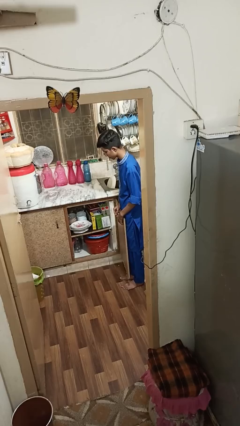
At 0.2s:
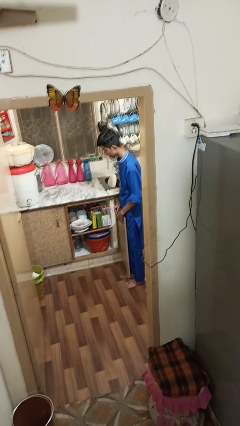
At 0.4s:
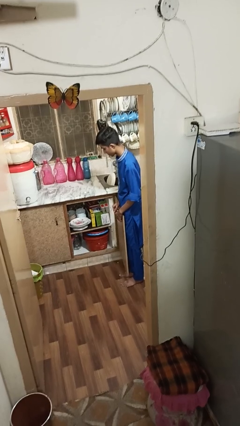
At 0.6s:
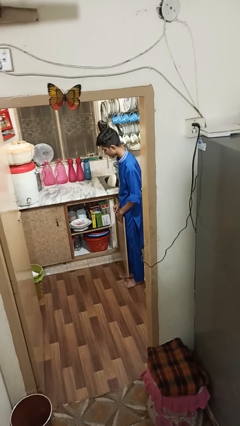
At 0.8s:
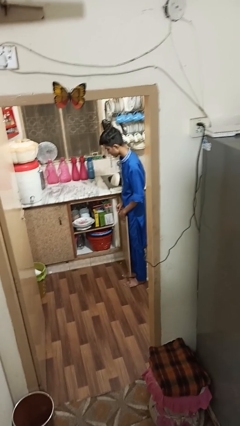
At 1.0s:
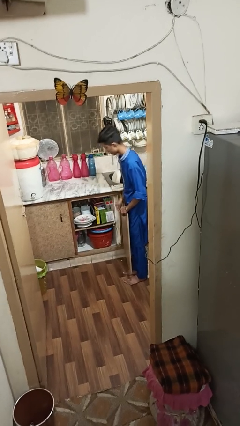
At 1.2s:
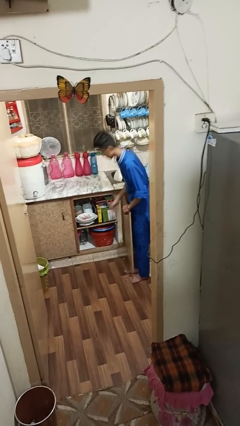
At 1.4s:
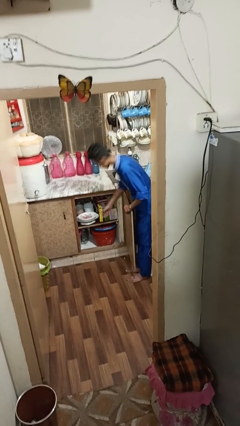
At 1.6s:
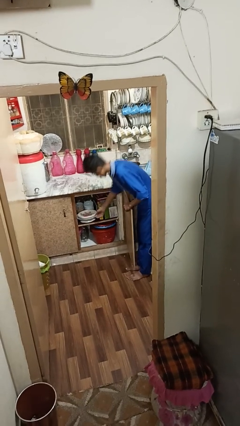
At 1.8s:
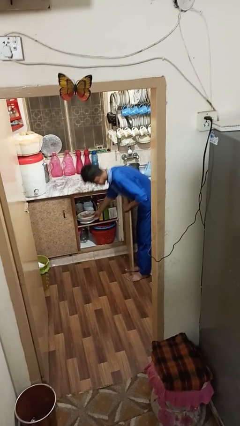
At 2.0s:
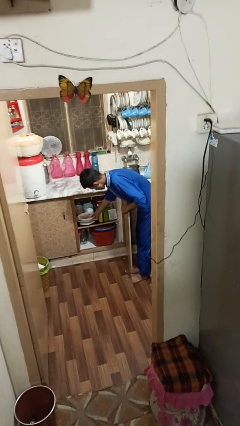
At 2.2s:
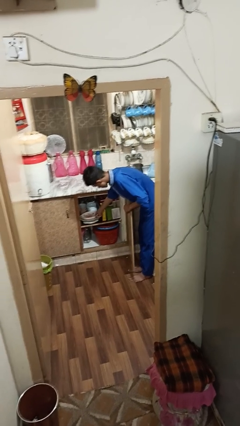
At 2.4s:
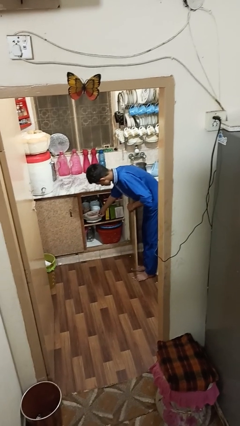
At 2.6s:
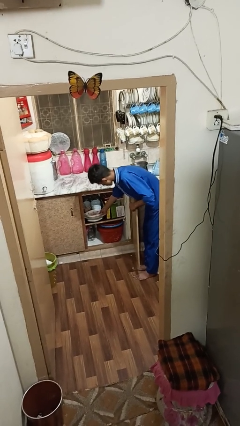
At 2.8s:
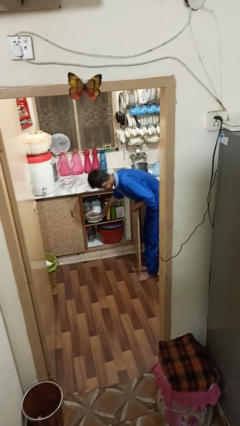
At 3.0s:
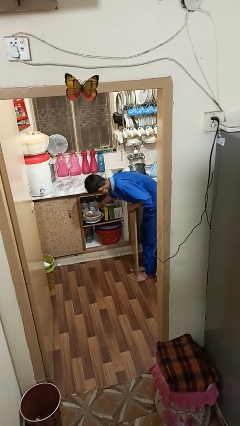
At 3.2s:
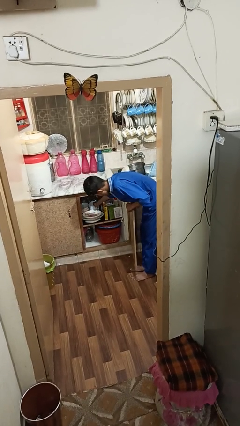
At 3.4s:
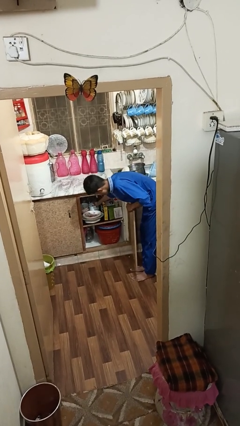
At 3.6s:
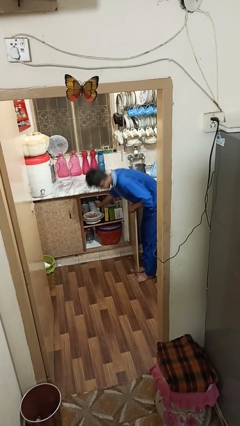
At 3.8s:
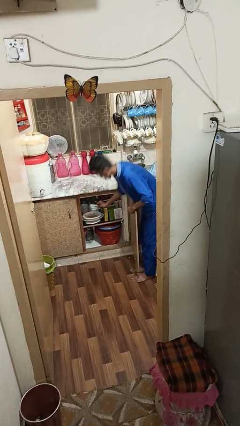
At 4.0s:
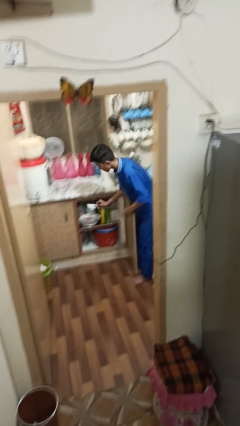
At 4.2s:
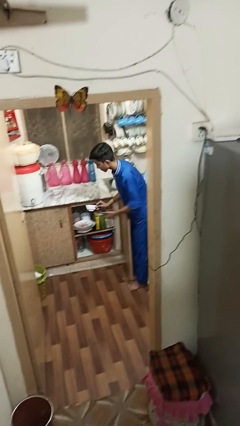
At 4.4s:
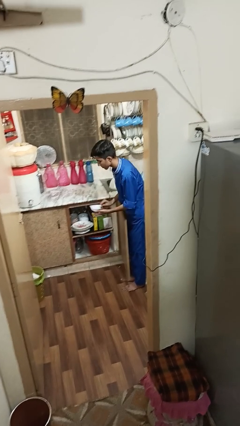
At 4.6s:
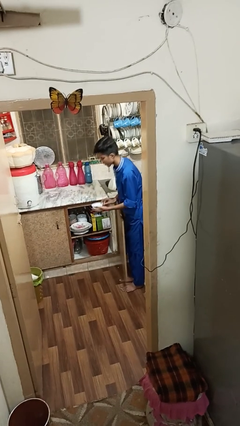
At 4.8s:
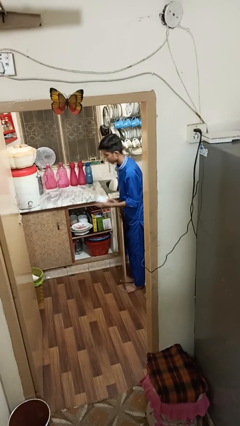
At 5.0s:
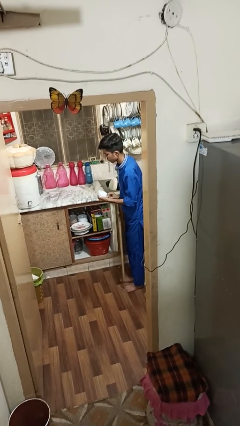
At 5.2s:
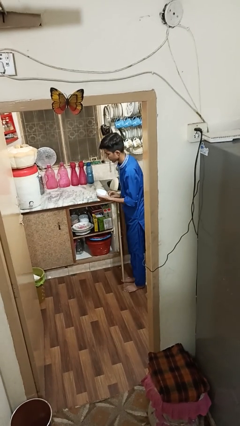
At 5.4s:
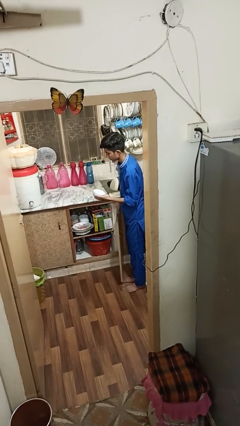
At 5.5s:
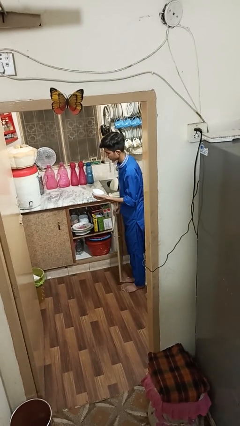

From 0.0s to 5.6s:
person takes object from cabinet

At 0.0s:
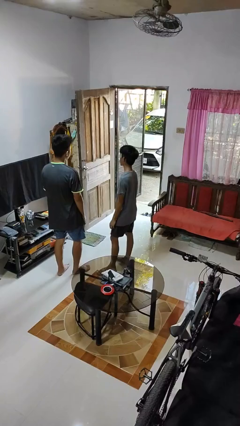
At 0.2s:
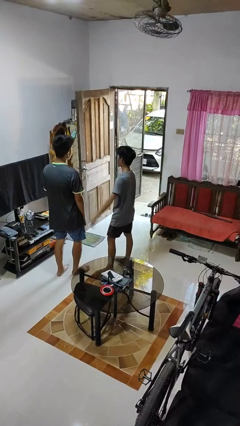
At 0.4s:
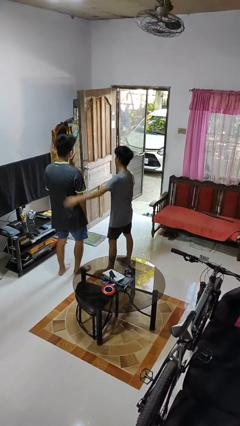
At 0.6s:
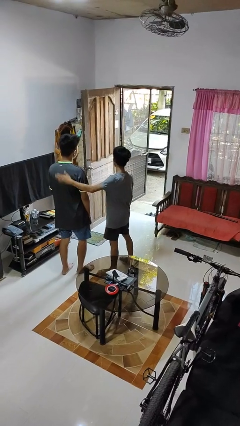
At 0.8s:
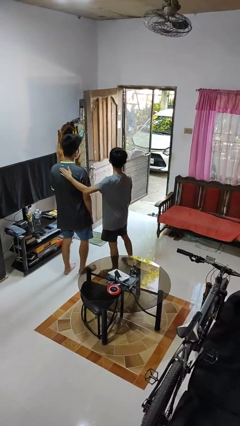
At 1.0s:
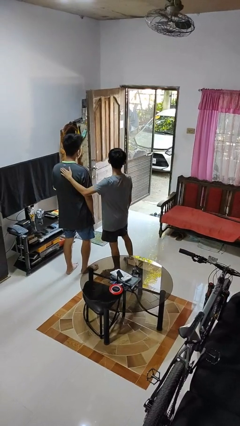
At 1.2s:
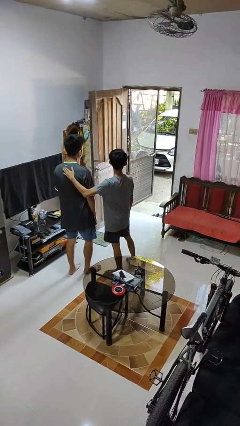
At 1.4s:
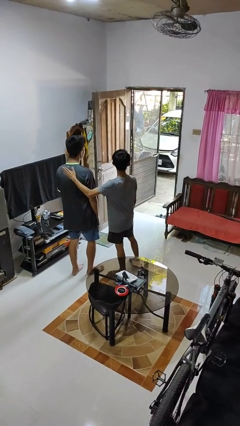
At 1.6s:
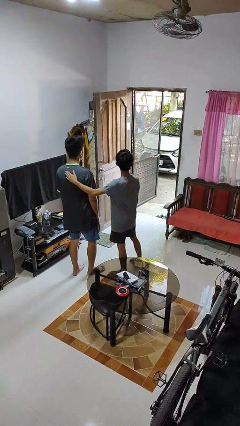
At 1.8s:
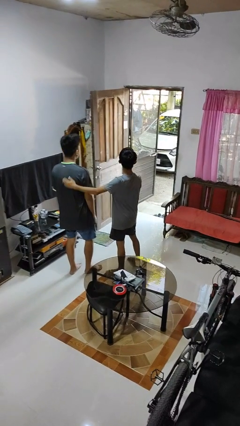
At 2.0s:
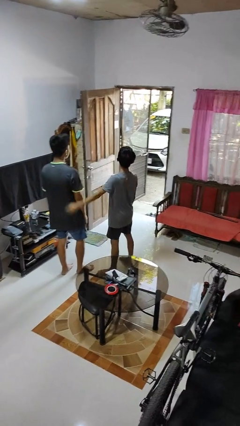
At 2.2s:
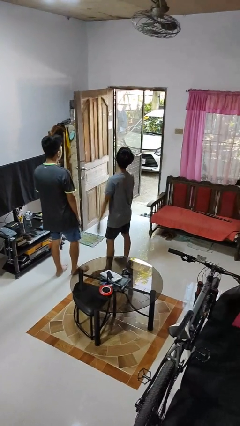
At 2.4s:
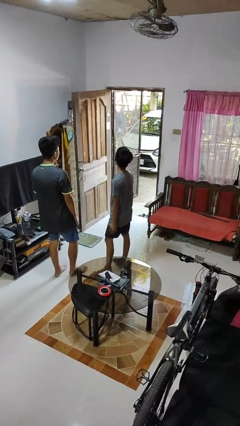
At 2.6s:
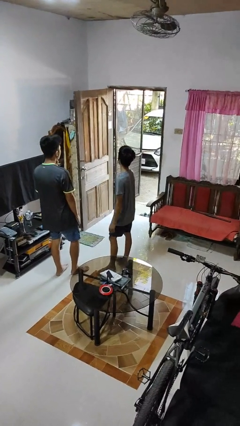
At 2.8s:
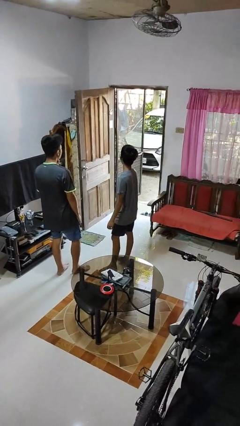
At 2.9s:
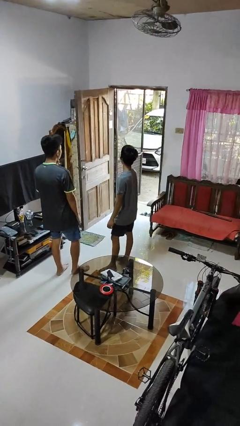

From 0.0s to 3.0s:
person touches back of person

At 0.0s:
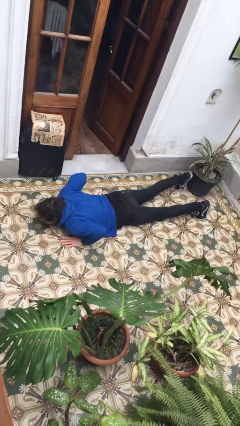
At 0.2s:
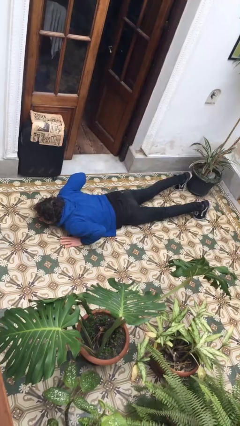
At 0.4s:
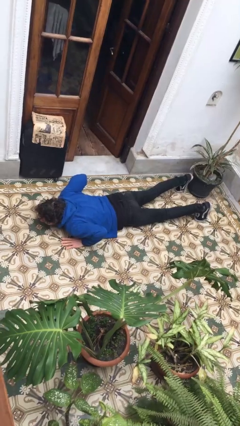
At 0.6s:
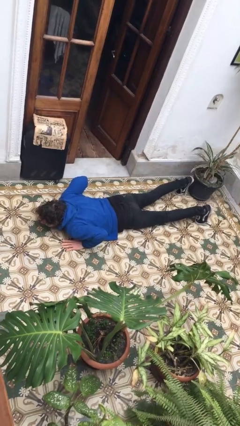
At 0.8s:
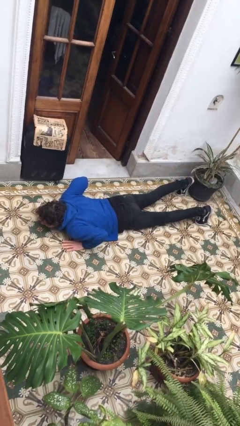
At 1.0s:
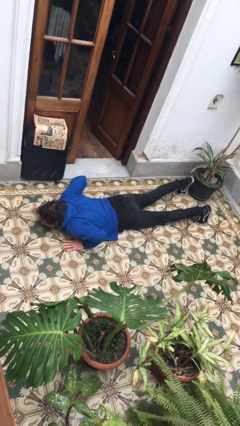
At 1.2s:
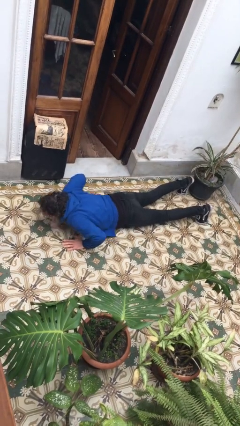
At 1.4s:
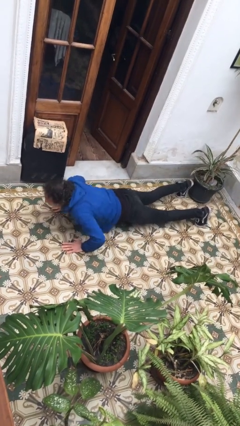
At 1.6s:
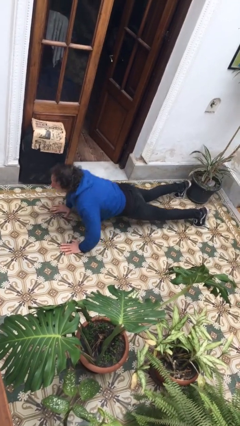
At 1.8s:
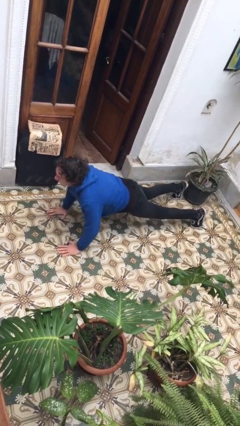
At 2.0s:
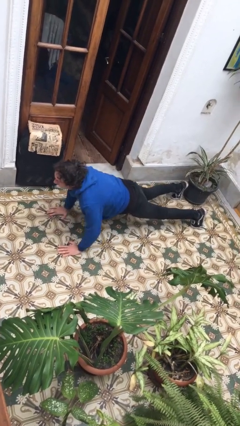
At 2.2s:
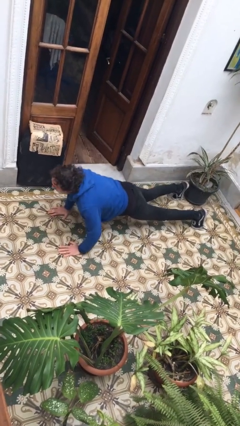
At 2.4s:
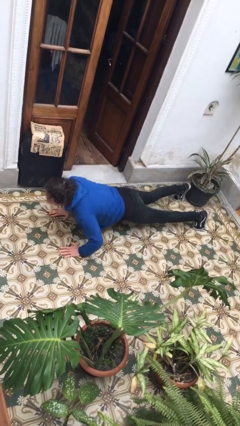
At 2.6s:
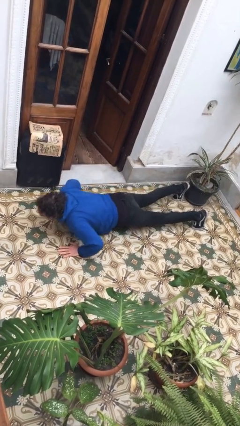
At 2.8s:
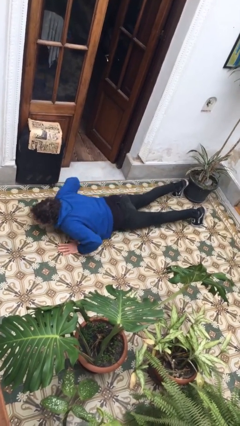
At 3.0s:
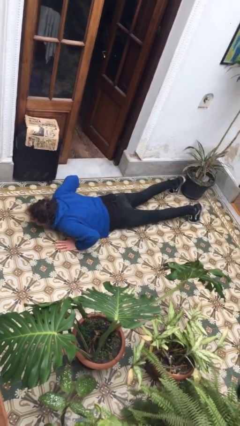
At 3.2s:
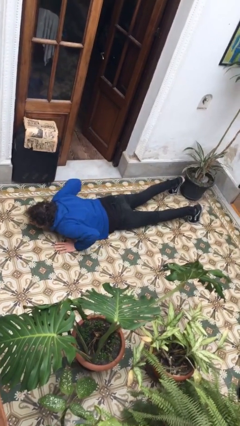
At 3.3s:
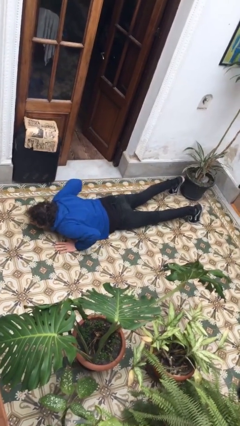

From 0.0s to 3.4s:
person exercises with pushup

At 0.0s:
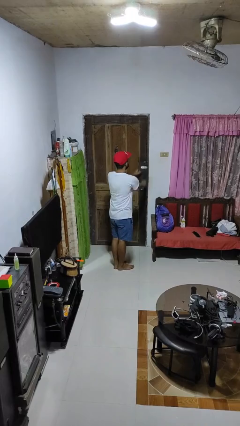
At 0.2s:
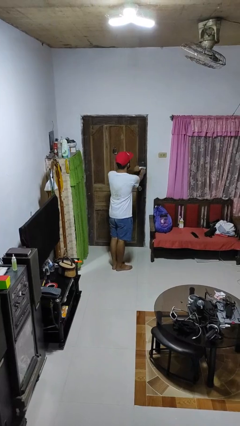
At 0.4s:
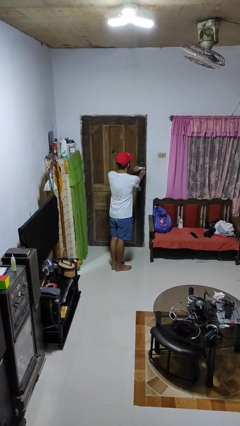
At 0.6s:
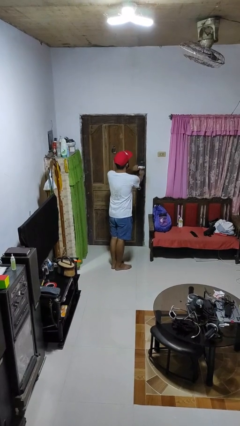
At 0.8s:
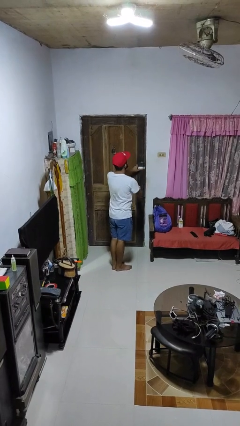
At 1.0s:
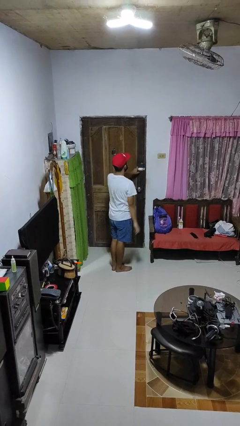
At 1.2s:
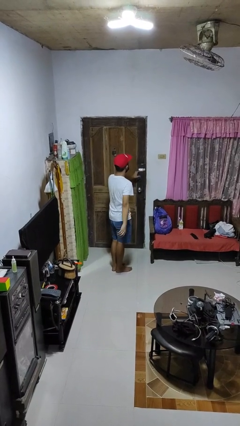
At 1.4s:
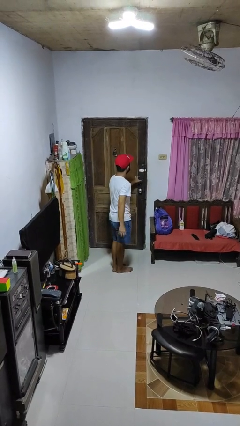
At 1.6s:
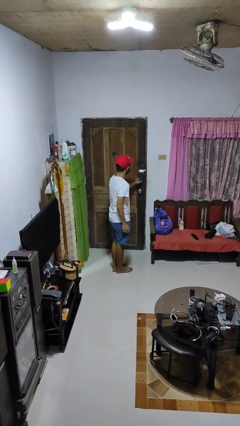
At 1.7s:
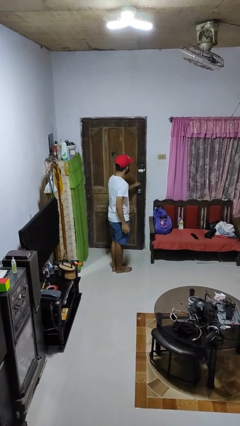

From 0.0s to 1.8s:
person unlocks door with keys

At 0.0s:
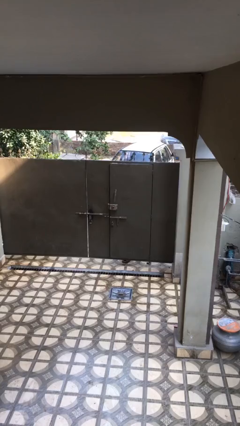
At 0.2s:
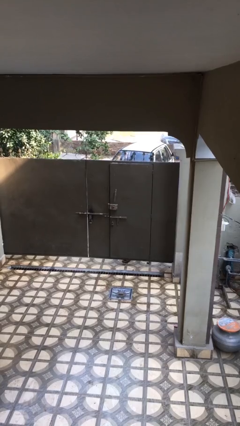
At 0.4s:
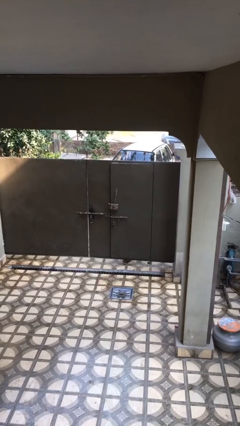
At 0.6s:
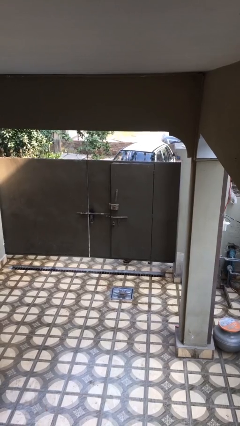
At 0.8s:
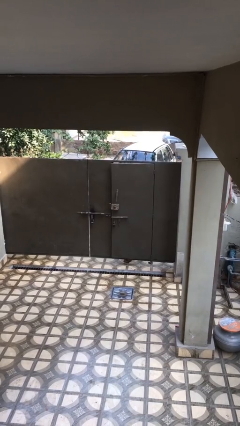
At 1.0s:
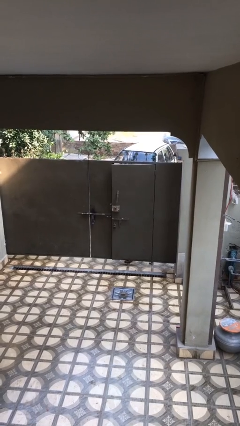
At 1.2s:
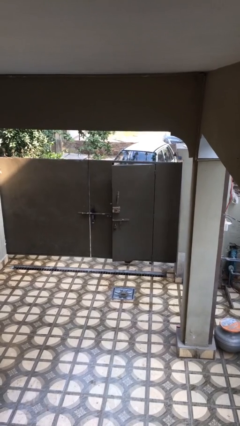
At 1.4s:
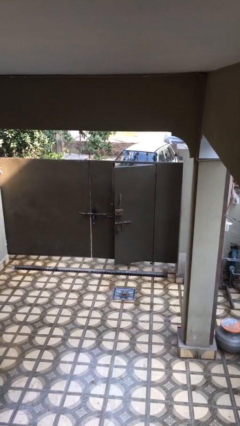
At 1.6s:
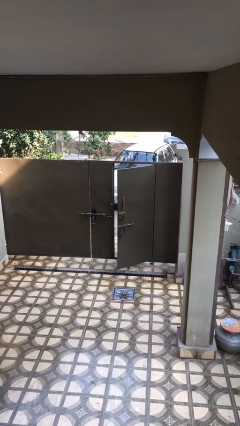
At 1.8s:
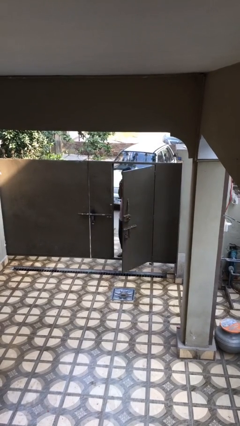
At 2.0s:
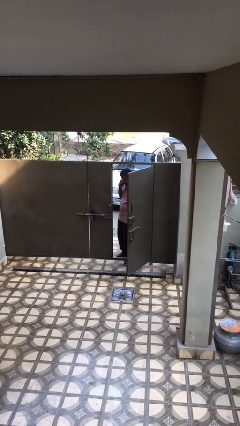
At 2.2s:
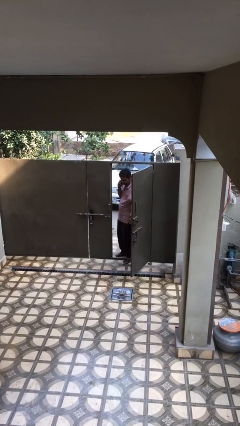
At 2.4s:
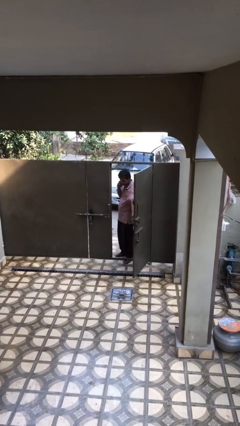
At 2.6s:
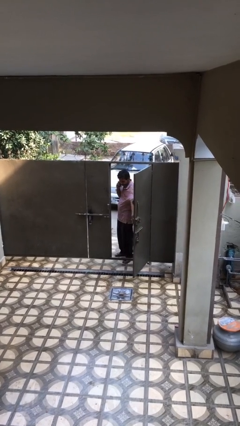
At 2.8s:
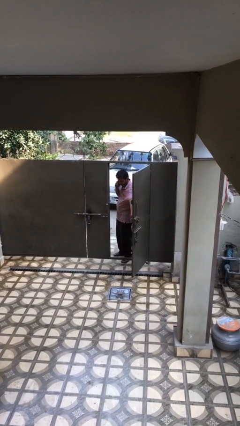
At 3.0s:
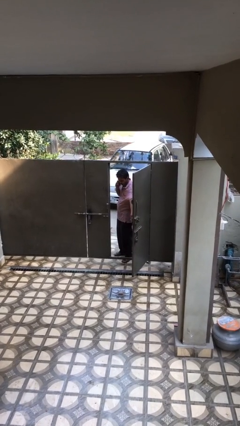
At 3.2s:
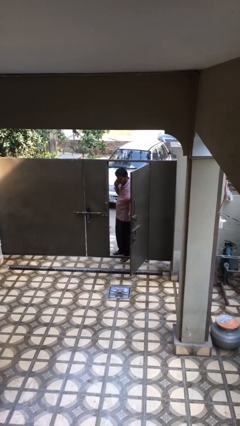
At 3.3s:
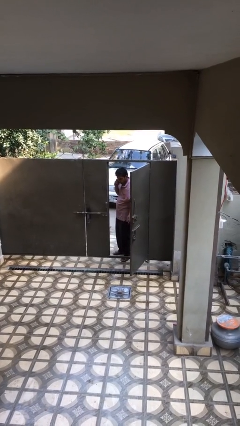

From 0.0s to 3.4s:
person opens facility door

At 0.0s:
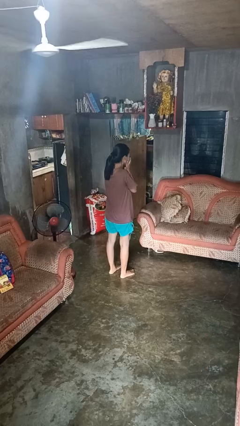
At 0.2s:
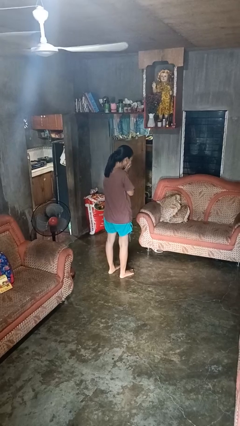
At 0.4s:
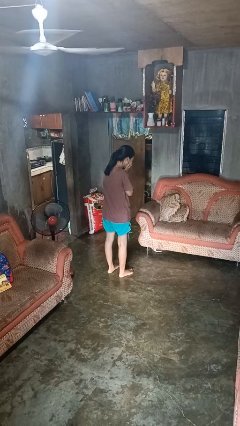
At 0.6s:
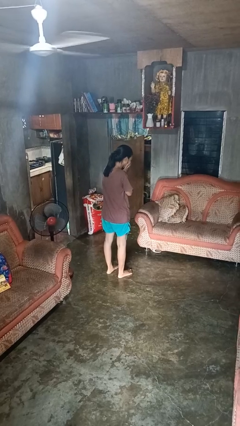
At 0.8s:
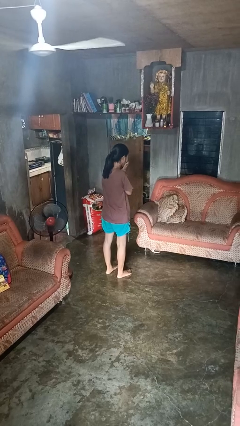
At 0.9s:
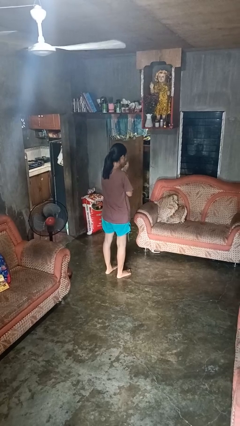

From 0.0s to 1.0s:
person sneezes into hand
